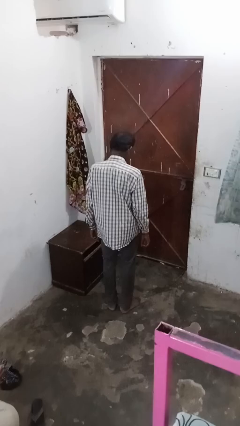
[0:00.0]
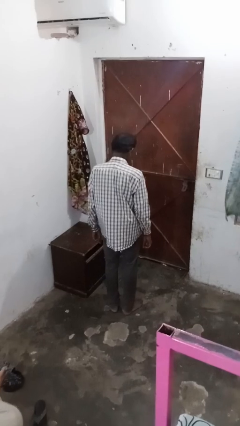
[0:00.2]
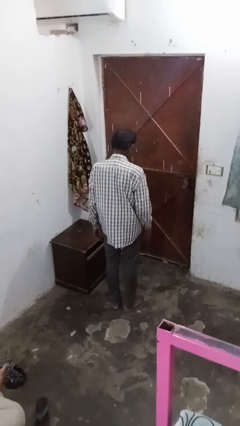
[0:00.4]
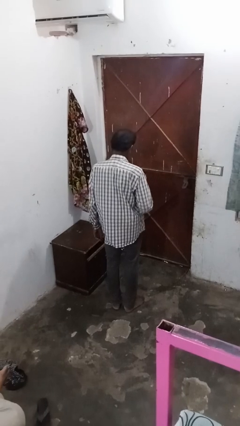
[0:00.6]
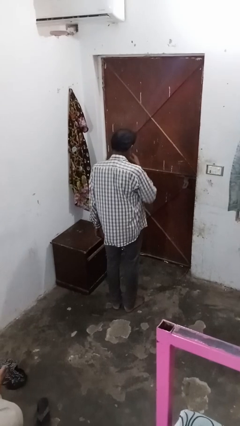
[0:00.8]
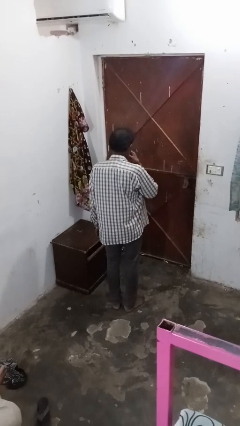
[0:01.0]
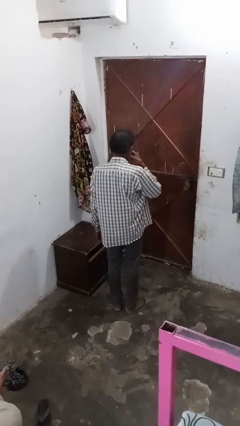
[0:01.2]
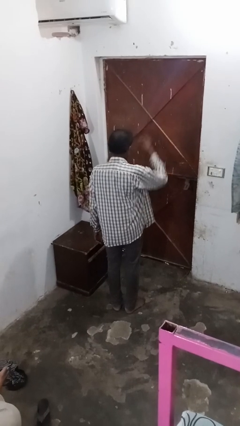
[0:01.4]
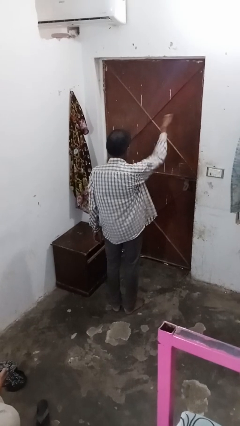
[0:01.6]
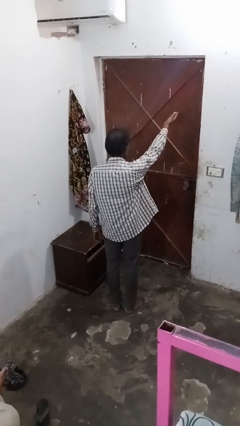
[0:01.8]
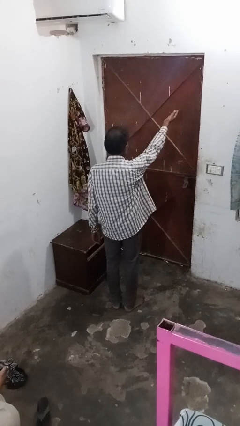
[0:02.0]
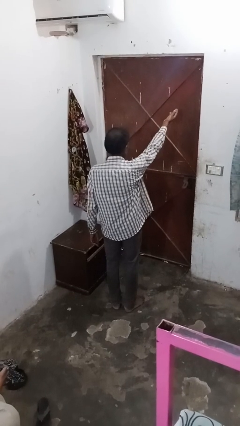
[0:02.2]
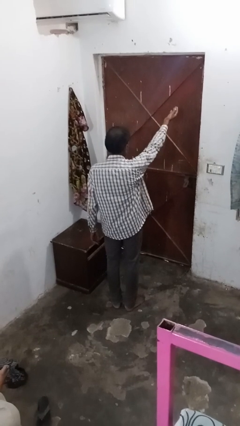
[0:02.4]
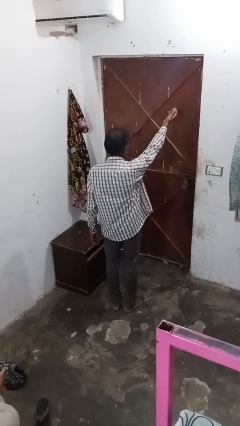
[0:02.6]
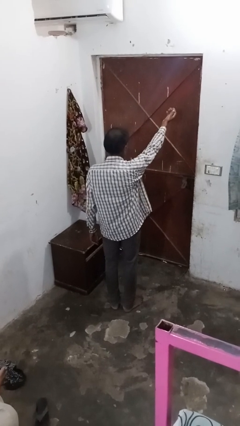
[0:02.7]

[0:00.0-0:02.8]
person gestures blow kiss

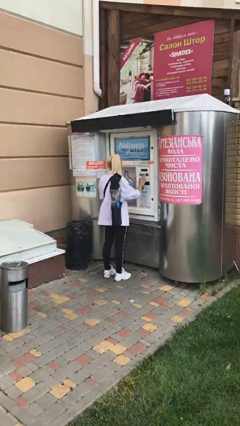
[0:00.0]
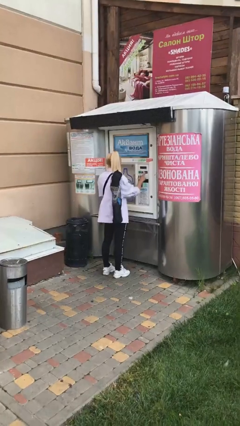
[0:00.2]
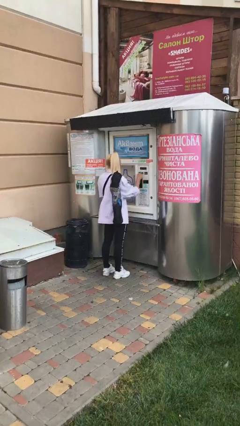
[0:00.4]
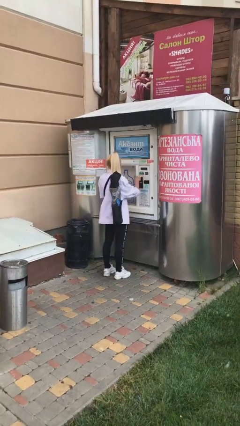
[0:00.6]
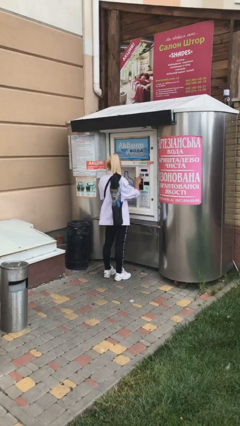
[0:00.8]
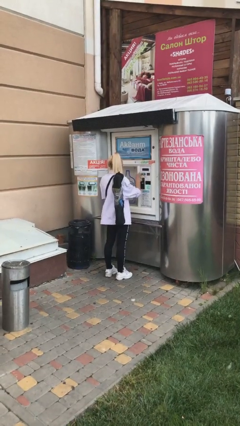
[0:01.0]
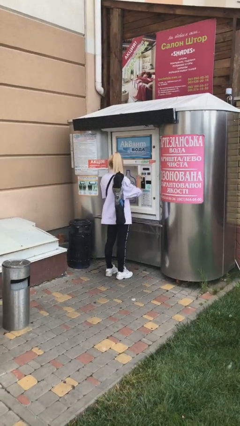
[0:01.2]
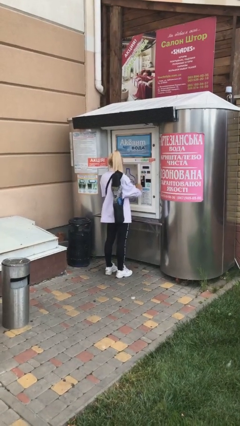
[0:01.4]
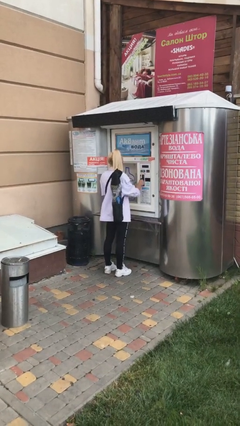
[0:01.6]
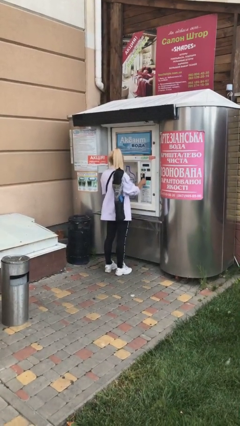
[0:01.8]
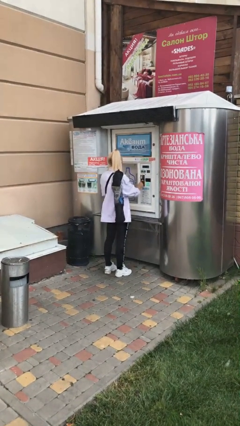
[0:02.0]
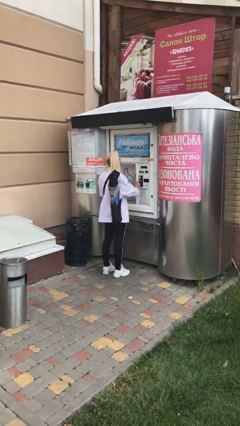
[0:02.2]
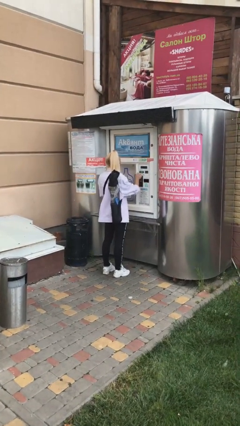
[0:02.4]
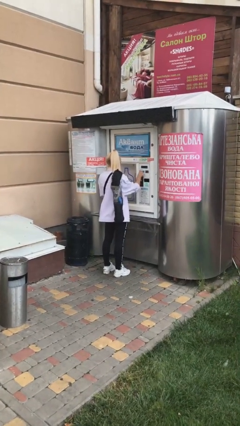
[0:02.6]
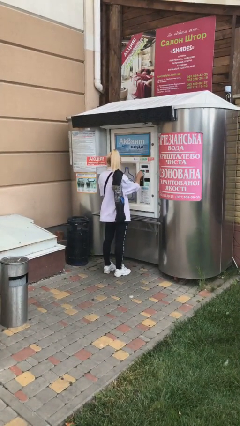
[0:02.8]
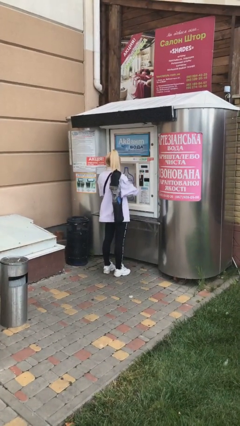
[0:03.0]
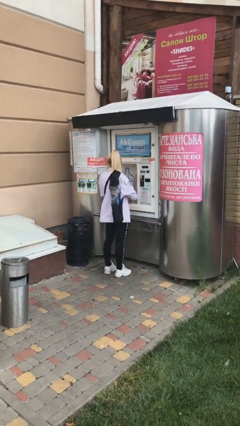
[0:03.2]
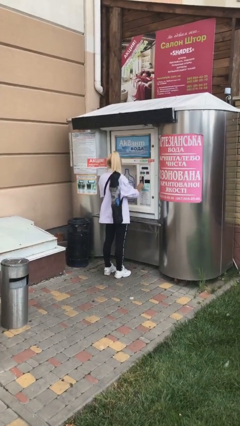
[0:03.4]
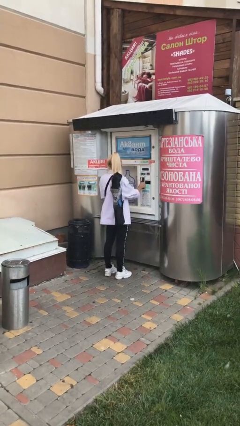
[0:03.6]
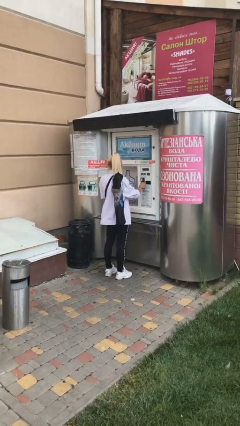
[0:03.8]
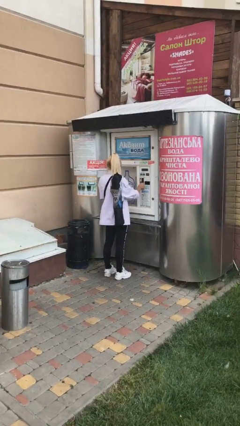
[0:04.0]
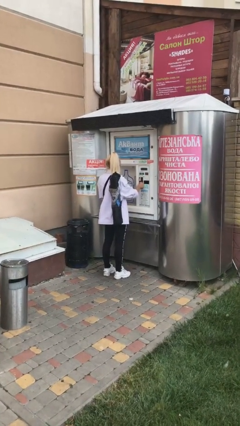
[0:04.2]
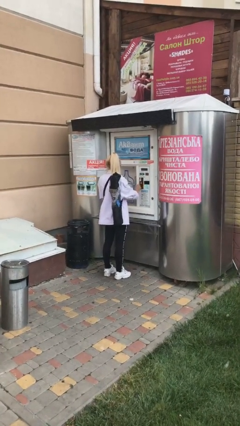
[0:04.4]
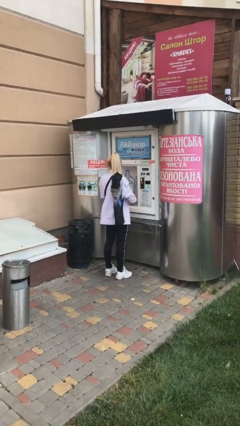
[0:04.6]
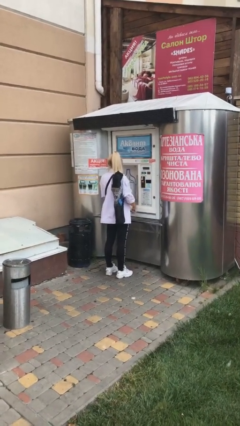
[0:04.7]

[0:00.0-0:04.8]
person purchases from machine

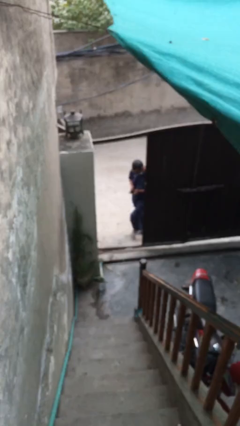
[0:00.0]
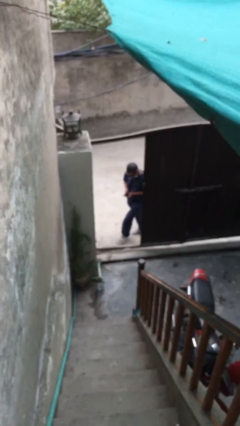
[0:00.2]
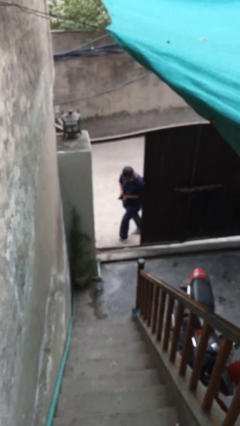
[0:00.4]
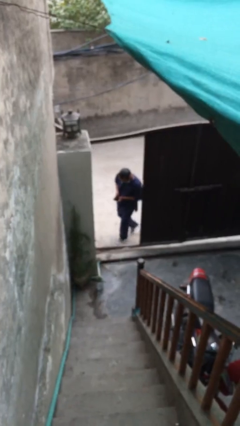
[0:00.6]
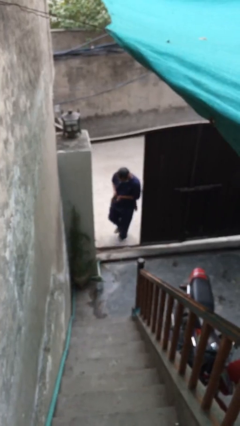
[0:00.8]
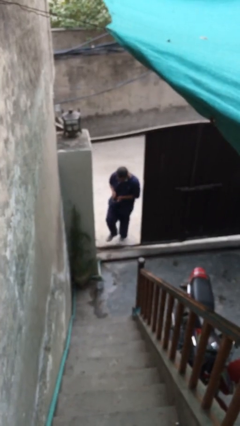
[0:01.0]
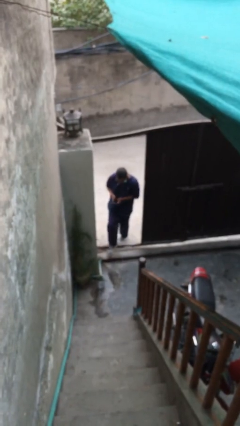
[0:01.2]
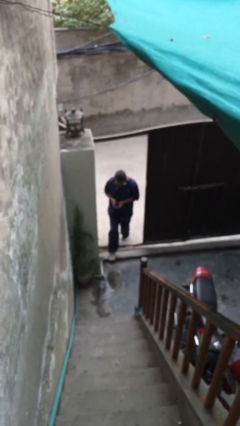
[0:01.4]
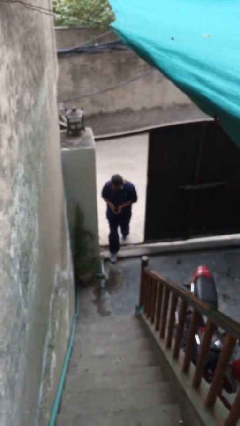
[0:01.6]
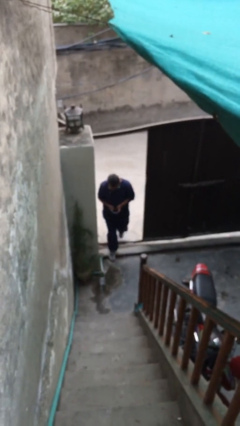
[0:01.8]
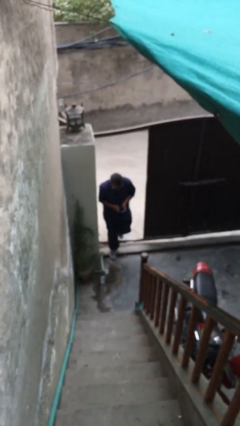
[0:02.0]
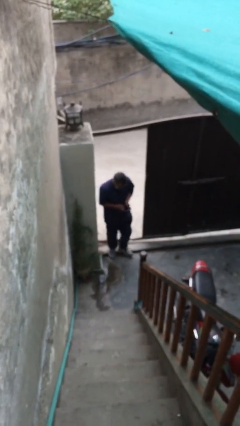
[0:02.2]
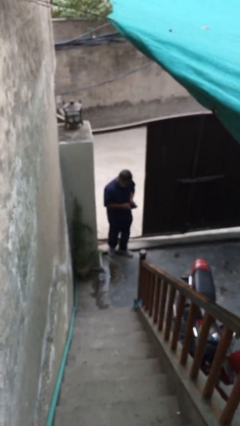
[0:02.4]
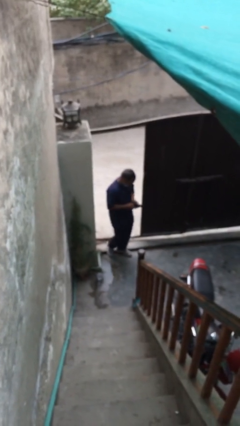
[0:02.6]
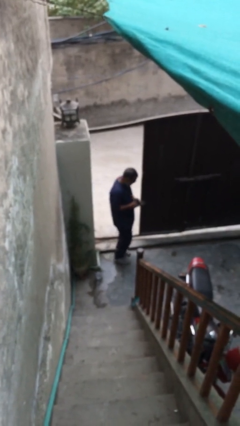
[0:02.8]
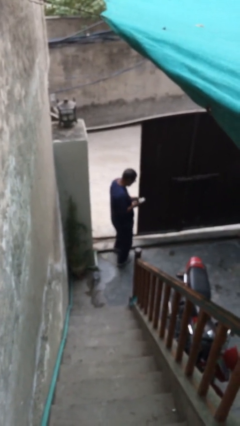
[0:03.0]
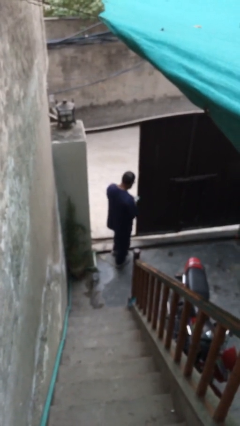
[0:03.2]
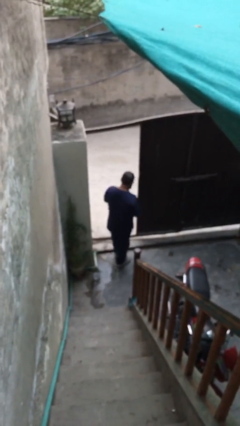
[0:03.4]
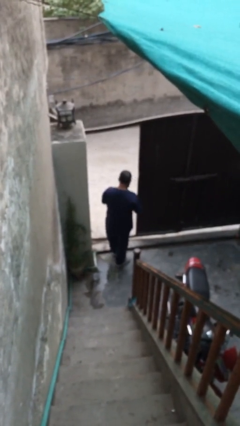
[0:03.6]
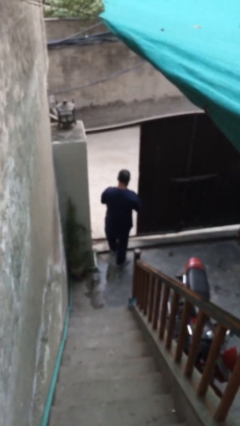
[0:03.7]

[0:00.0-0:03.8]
person enters scene through structure

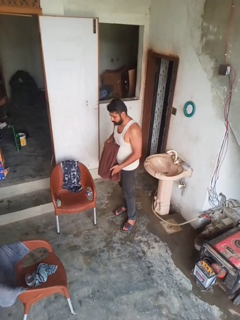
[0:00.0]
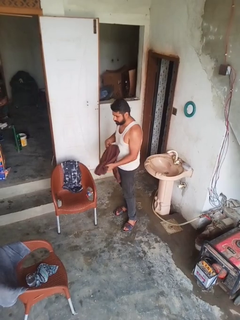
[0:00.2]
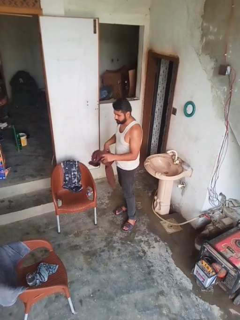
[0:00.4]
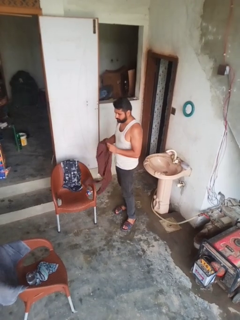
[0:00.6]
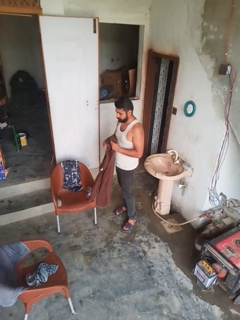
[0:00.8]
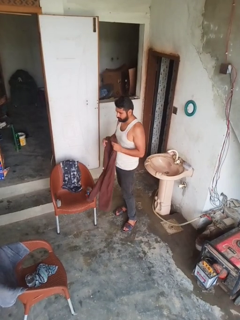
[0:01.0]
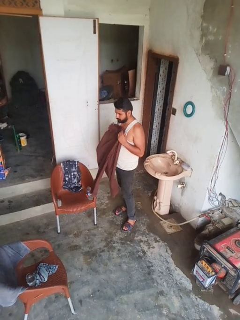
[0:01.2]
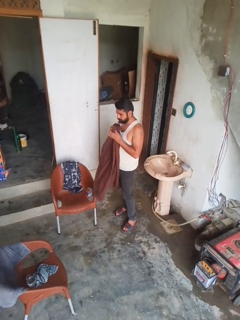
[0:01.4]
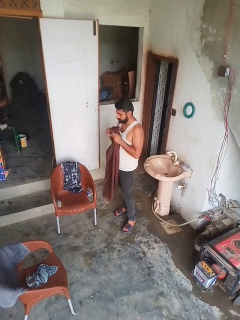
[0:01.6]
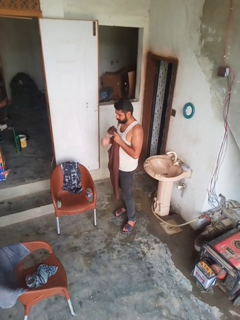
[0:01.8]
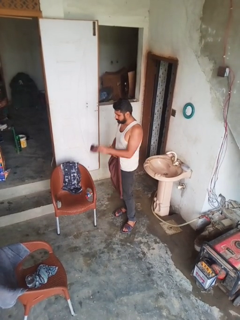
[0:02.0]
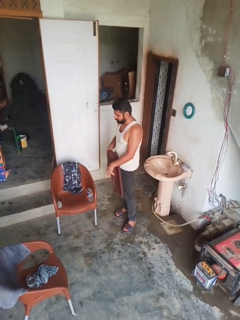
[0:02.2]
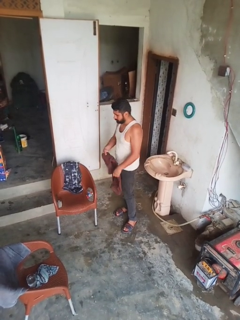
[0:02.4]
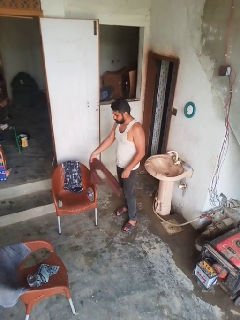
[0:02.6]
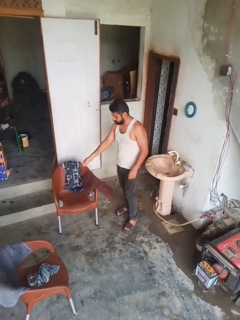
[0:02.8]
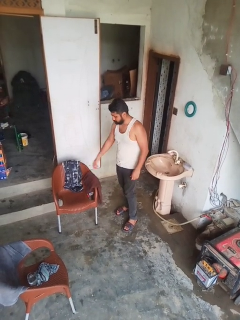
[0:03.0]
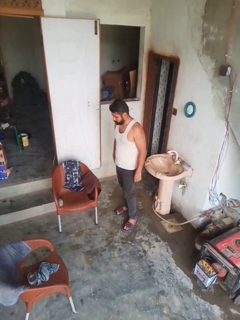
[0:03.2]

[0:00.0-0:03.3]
person folds pants

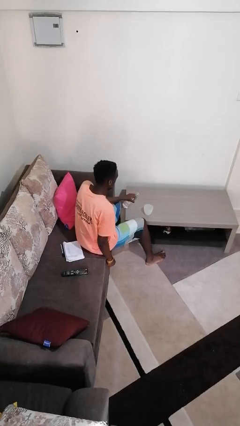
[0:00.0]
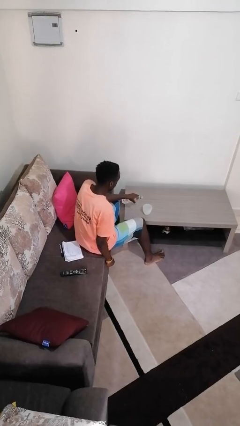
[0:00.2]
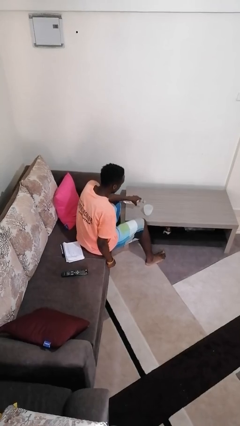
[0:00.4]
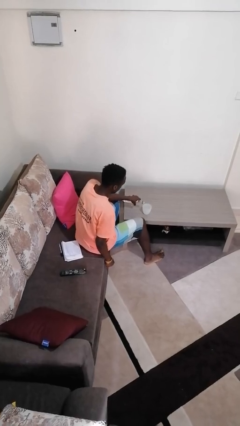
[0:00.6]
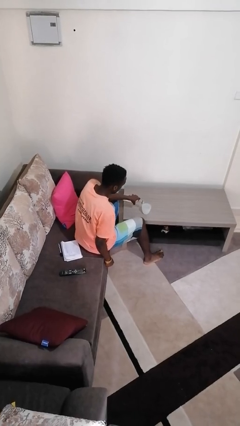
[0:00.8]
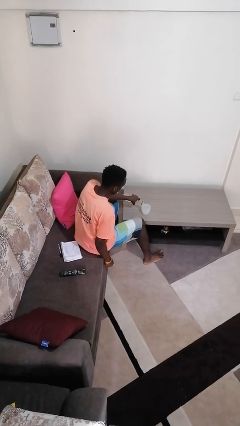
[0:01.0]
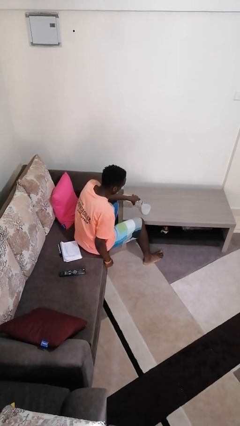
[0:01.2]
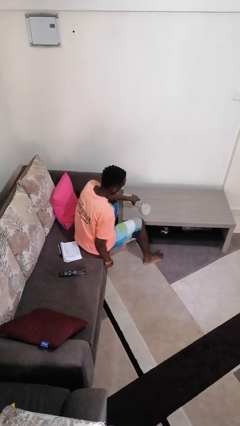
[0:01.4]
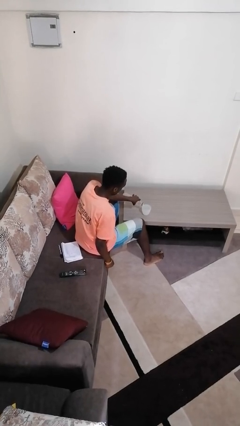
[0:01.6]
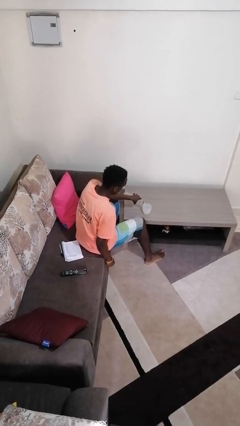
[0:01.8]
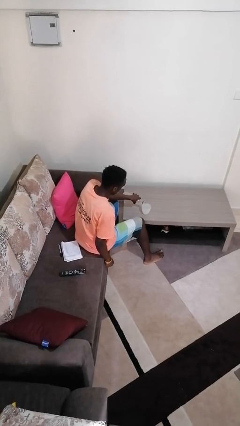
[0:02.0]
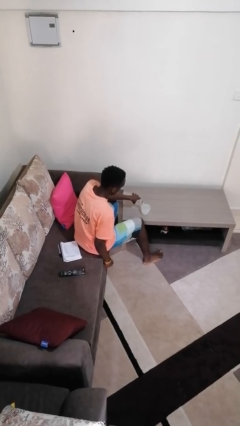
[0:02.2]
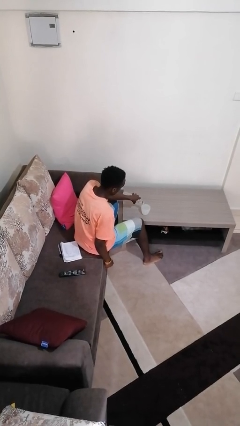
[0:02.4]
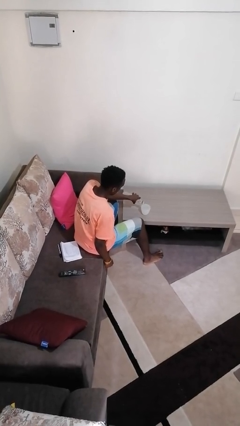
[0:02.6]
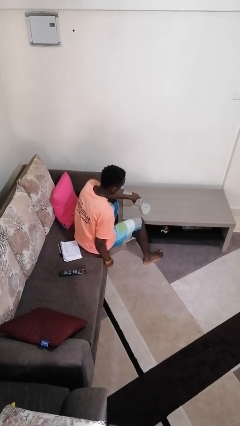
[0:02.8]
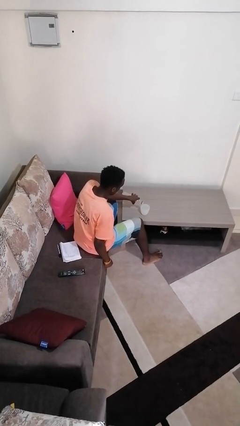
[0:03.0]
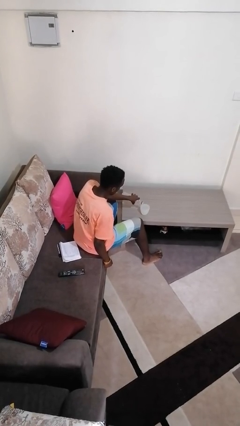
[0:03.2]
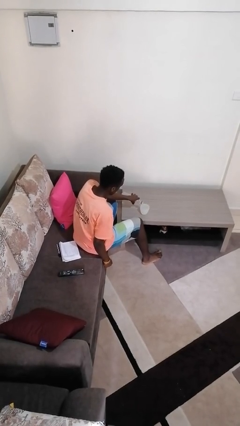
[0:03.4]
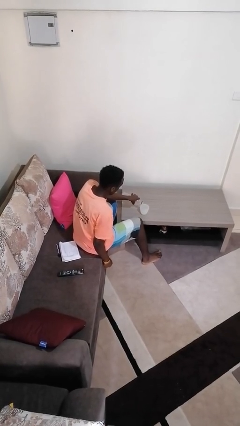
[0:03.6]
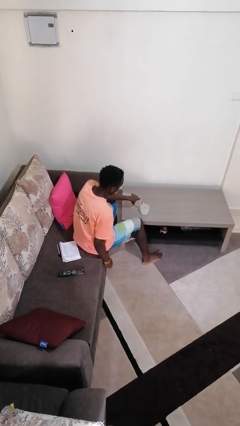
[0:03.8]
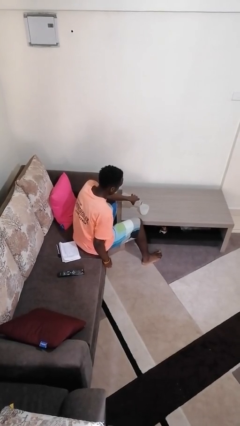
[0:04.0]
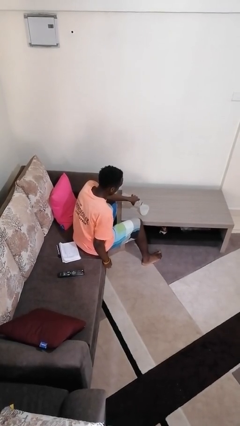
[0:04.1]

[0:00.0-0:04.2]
person pours liquid into cup

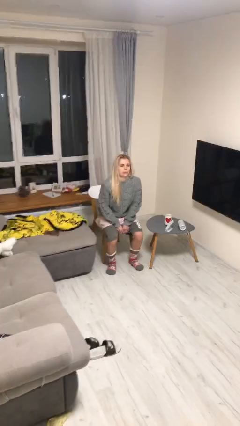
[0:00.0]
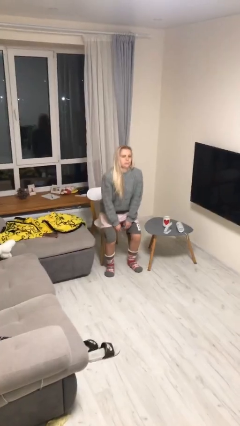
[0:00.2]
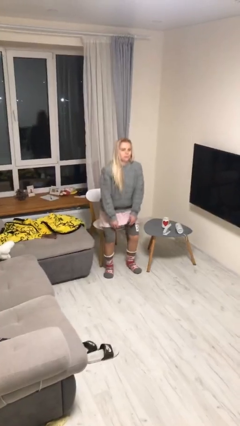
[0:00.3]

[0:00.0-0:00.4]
person stands up
